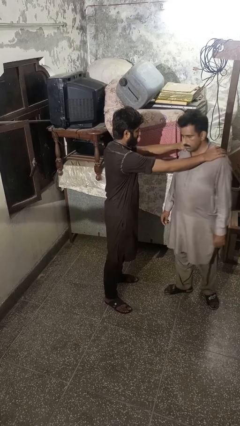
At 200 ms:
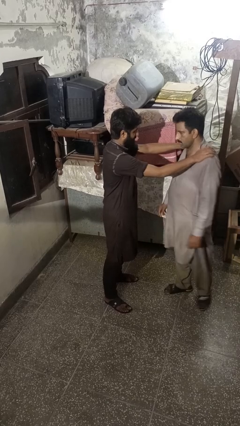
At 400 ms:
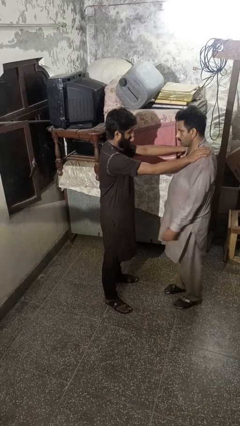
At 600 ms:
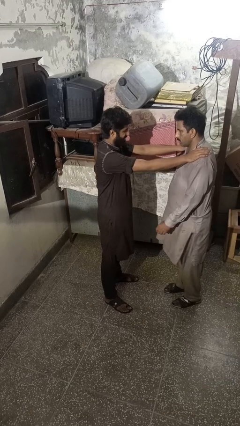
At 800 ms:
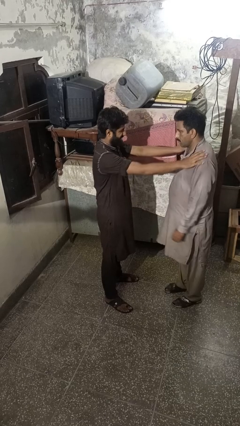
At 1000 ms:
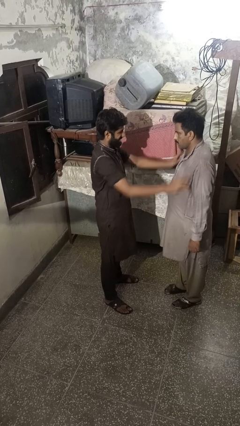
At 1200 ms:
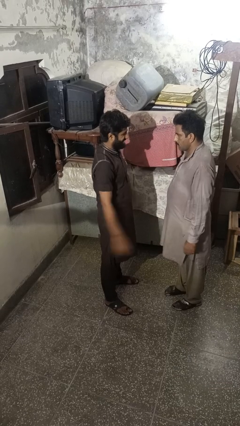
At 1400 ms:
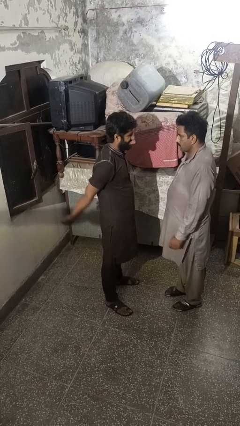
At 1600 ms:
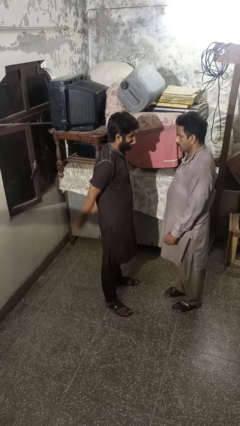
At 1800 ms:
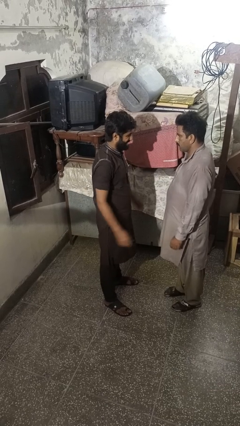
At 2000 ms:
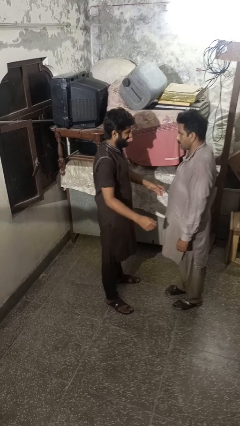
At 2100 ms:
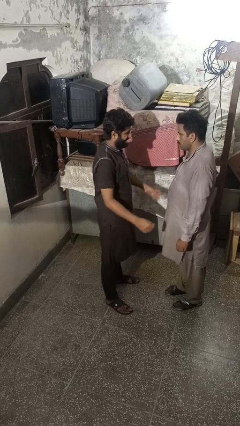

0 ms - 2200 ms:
person spins person around

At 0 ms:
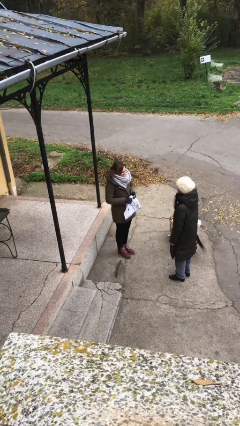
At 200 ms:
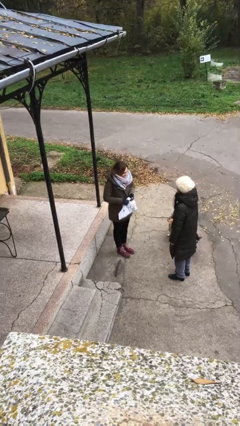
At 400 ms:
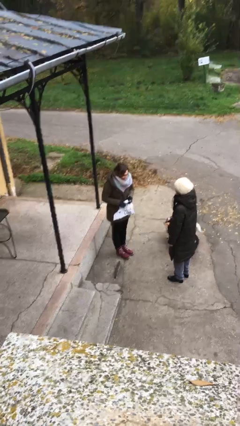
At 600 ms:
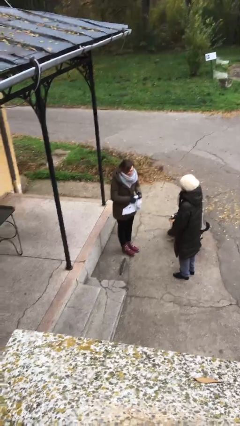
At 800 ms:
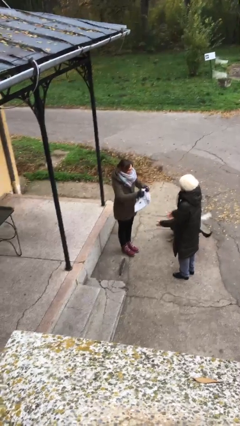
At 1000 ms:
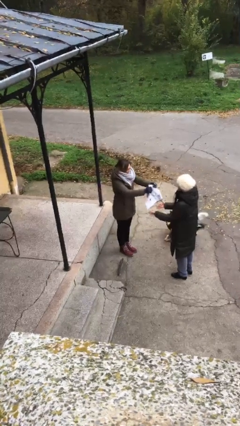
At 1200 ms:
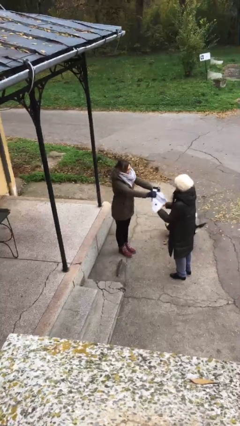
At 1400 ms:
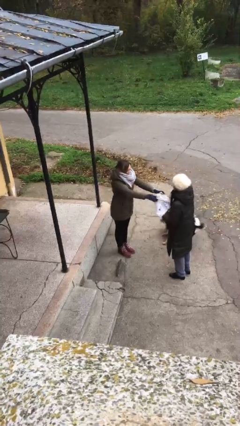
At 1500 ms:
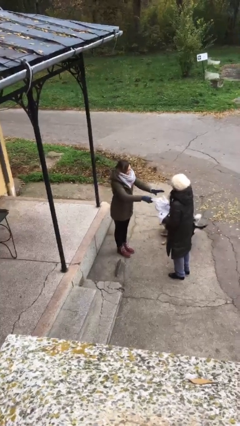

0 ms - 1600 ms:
person transfers object to person

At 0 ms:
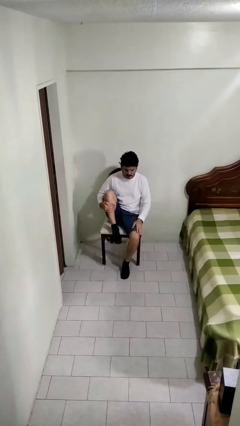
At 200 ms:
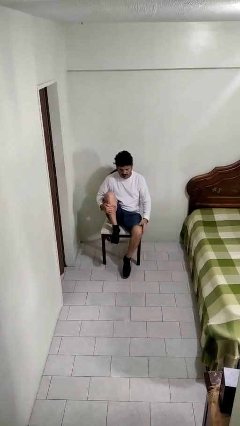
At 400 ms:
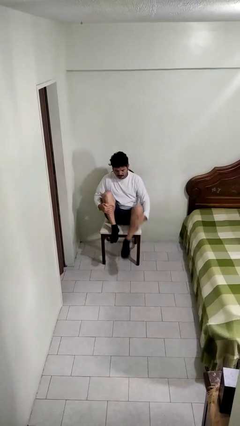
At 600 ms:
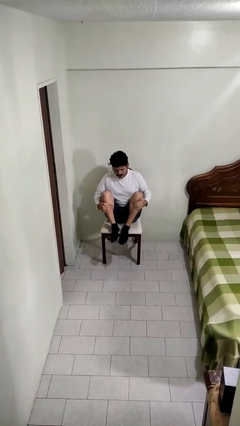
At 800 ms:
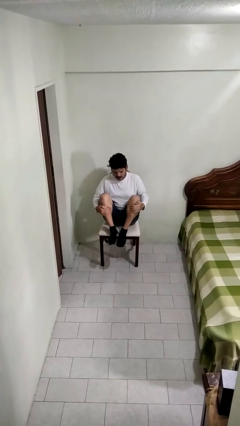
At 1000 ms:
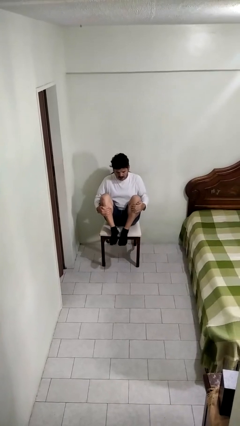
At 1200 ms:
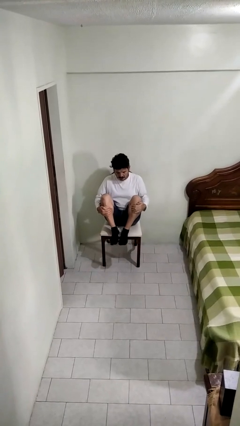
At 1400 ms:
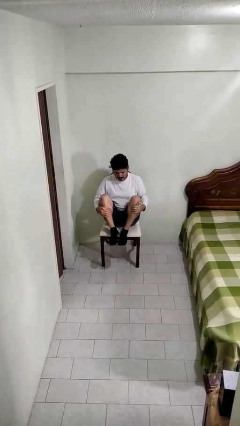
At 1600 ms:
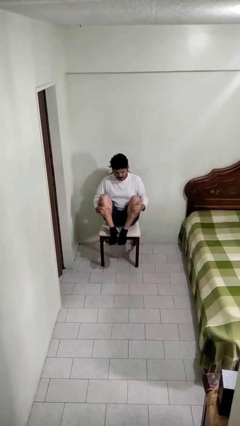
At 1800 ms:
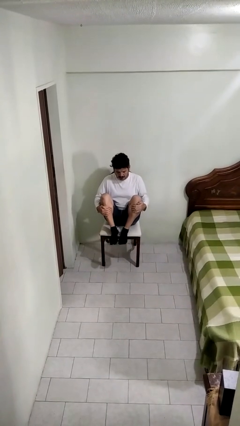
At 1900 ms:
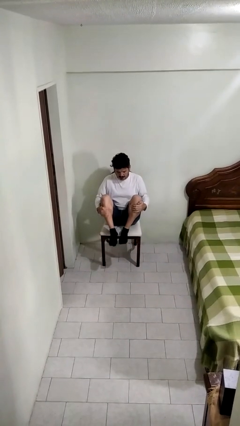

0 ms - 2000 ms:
person puts feet up

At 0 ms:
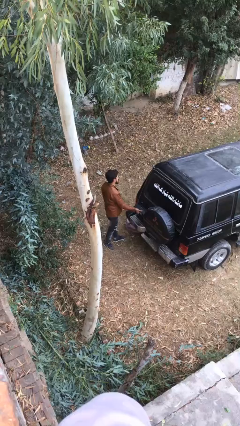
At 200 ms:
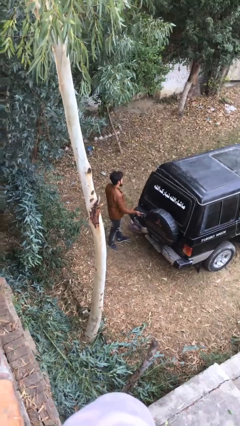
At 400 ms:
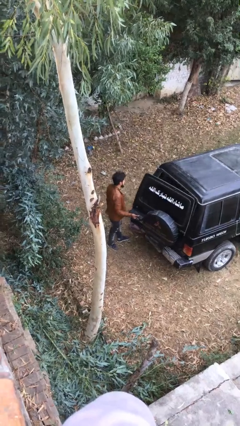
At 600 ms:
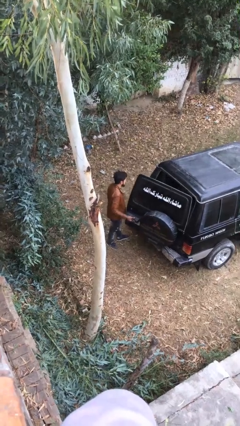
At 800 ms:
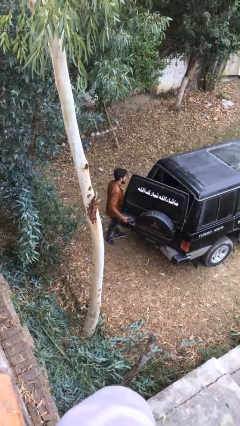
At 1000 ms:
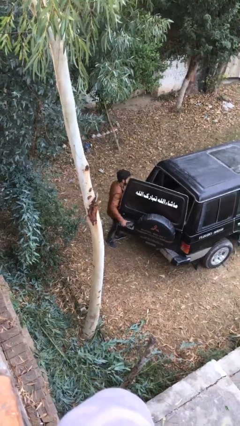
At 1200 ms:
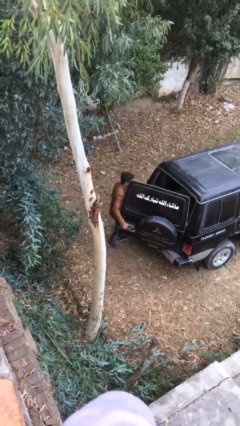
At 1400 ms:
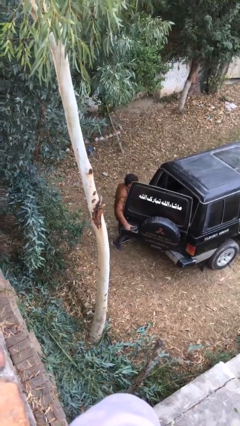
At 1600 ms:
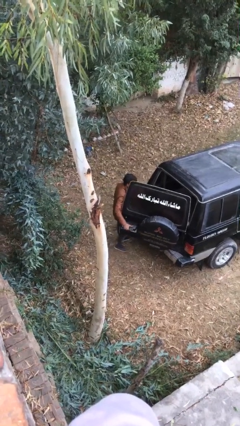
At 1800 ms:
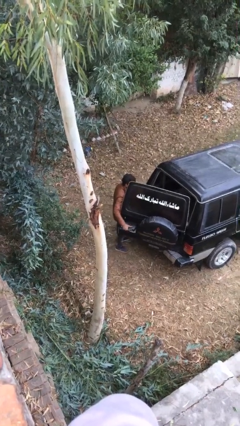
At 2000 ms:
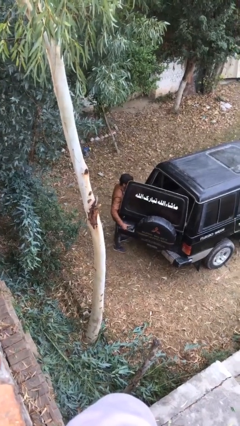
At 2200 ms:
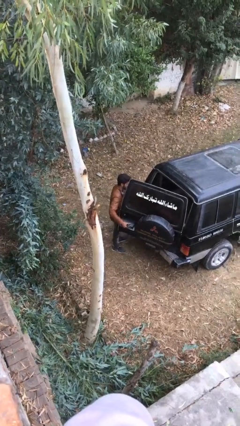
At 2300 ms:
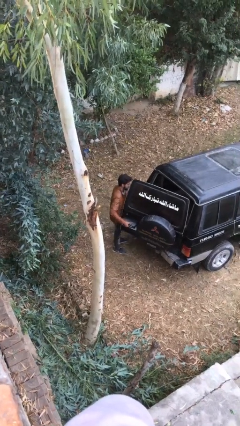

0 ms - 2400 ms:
person opens car trunk

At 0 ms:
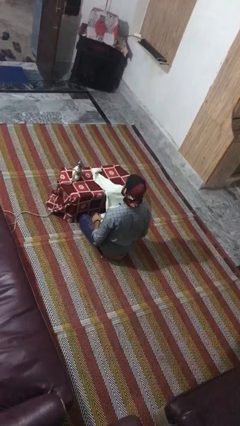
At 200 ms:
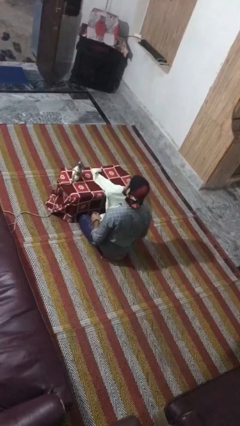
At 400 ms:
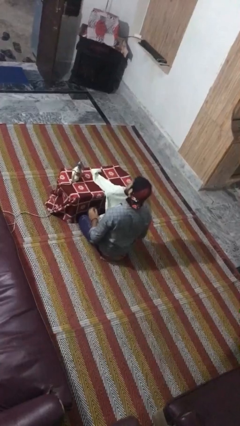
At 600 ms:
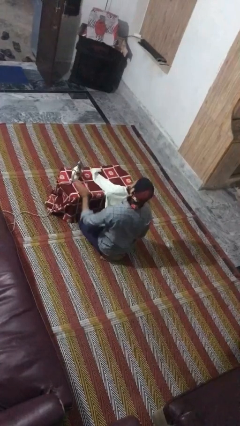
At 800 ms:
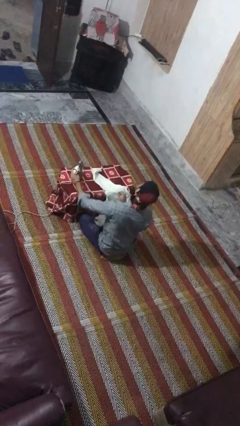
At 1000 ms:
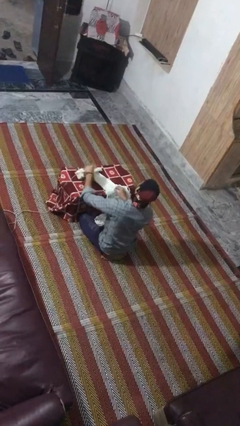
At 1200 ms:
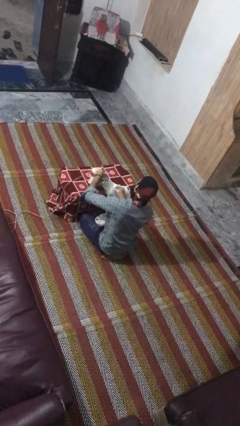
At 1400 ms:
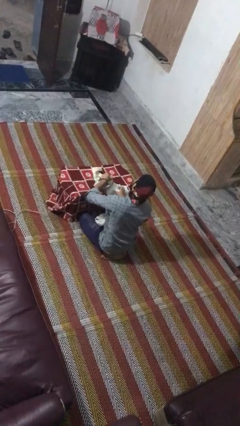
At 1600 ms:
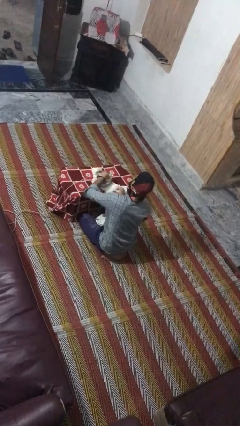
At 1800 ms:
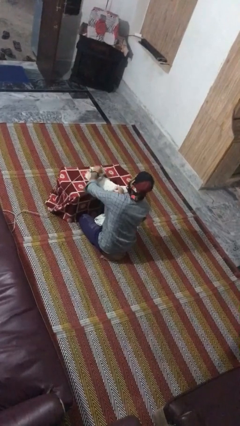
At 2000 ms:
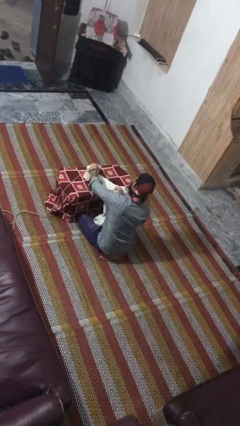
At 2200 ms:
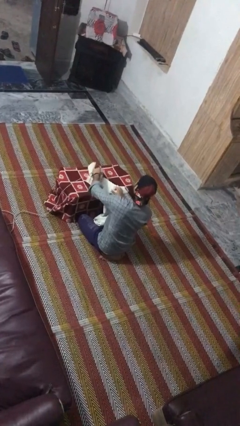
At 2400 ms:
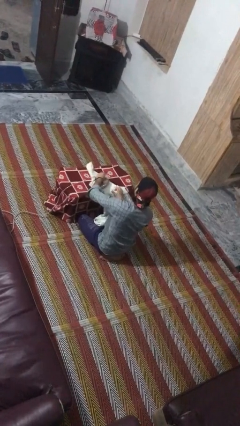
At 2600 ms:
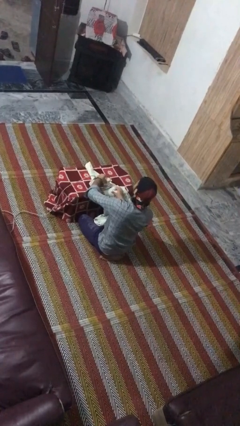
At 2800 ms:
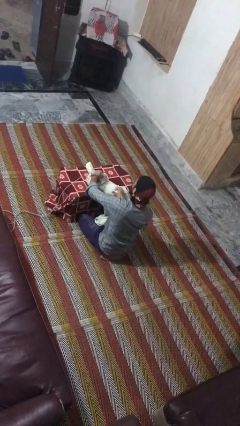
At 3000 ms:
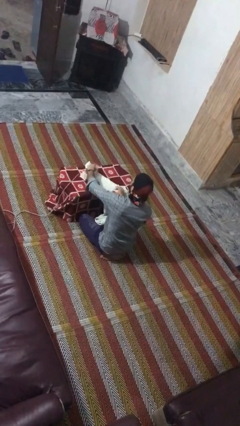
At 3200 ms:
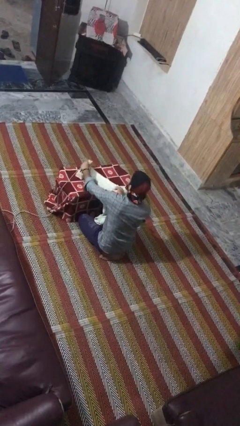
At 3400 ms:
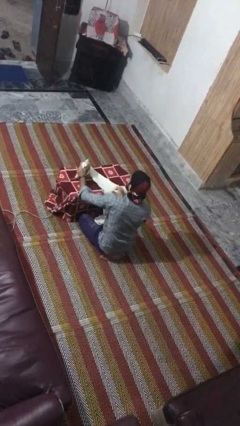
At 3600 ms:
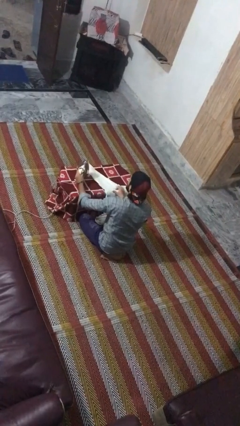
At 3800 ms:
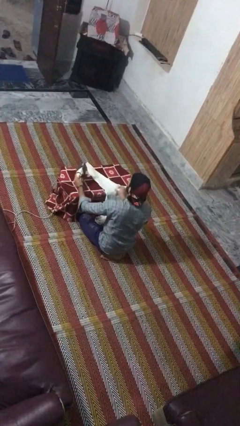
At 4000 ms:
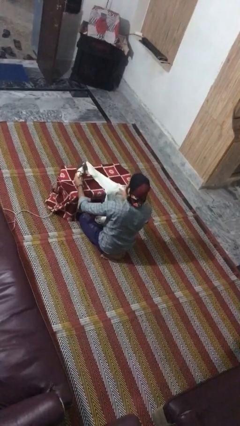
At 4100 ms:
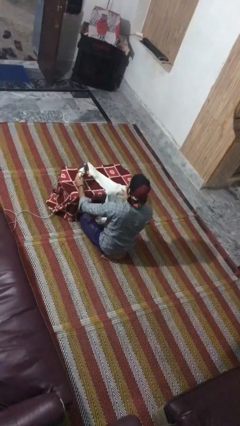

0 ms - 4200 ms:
person irons clothes

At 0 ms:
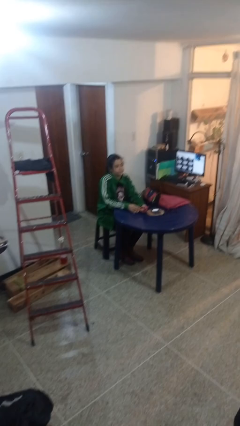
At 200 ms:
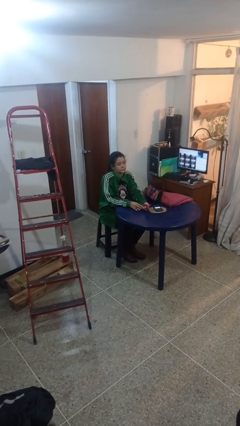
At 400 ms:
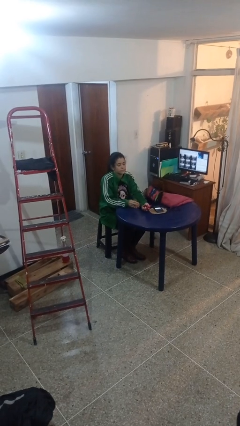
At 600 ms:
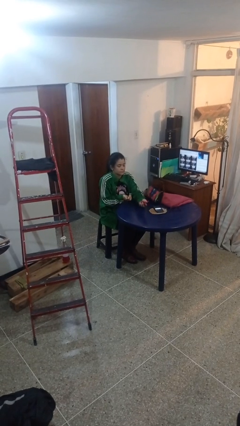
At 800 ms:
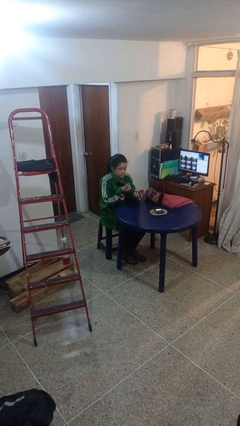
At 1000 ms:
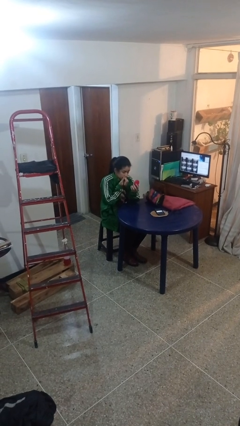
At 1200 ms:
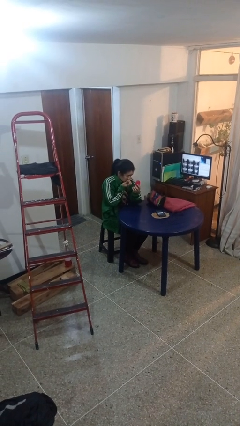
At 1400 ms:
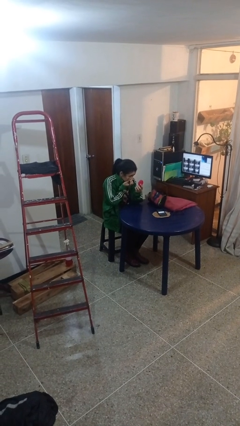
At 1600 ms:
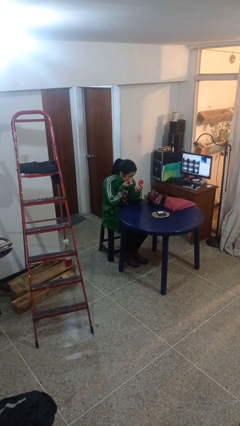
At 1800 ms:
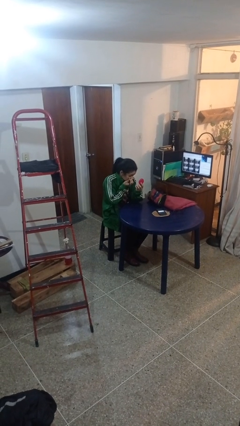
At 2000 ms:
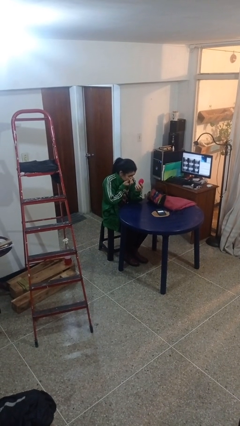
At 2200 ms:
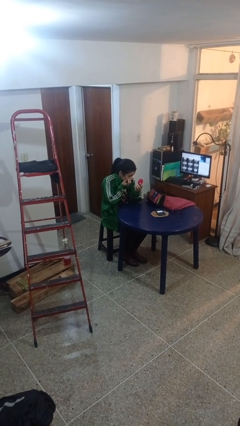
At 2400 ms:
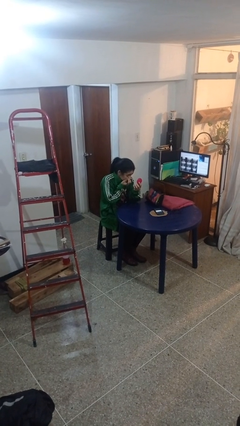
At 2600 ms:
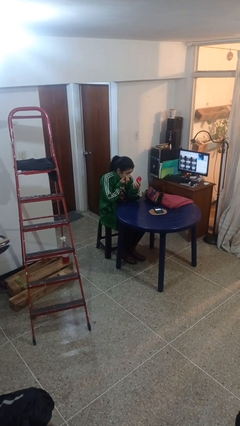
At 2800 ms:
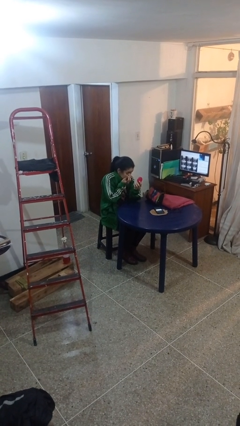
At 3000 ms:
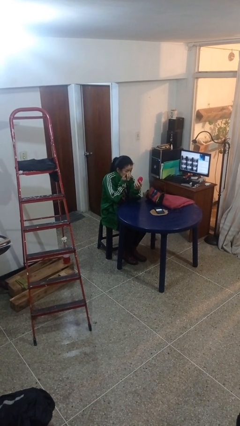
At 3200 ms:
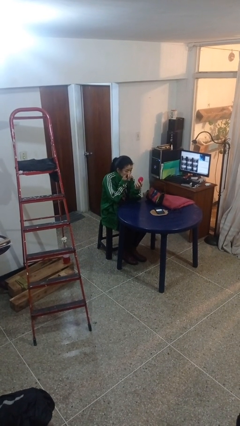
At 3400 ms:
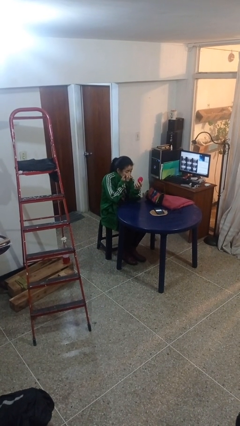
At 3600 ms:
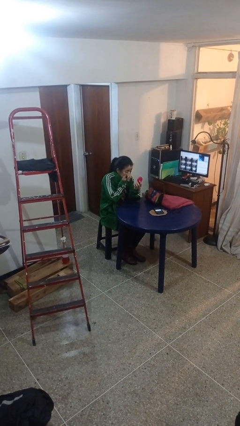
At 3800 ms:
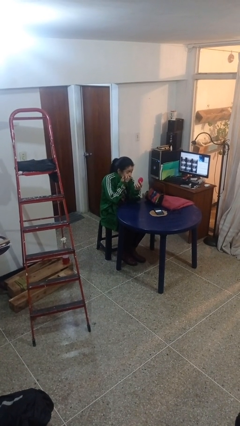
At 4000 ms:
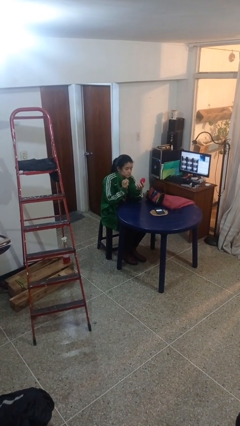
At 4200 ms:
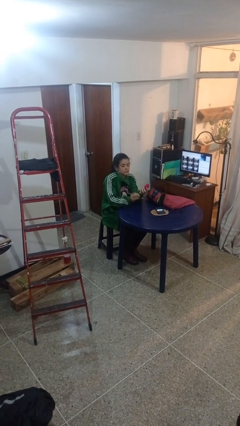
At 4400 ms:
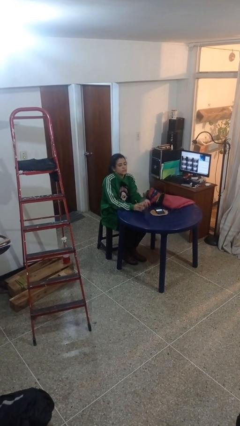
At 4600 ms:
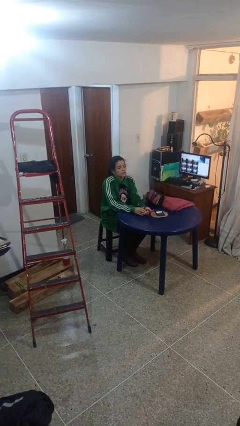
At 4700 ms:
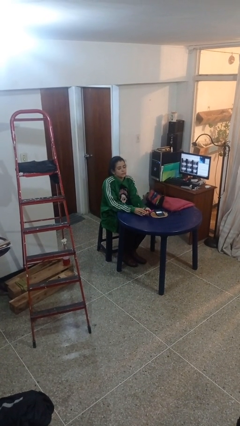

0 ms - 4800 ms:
person applies eye makeup

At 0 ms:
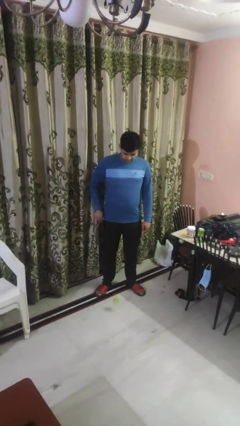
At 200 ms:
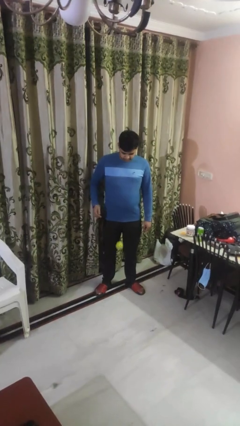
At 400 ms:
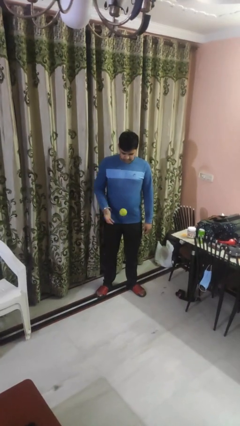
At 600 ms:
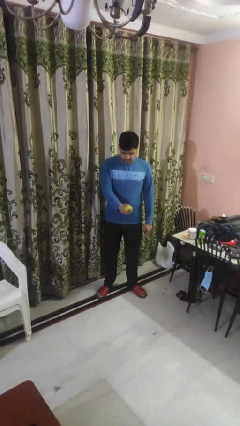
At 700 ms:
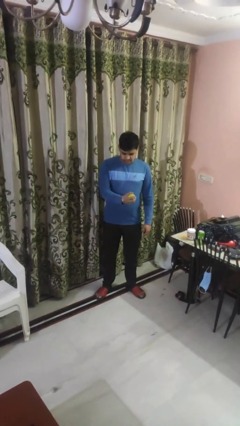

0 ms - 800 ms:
person bounces ball on floor
